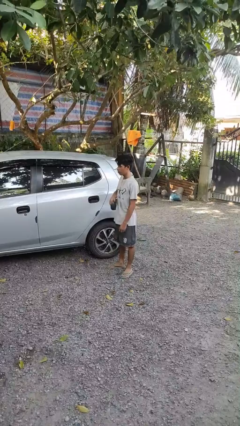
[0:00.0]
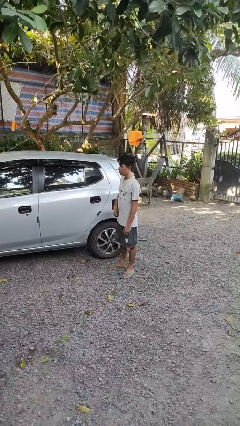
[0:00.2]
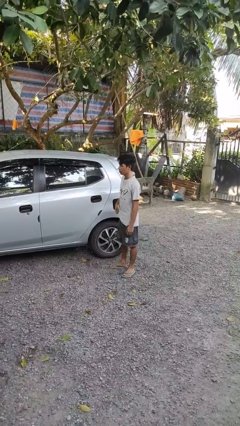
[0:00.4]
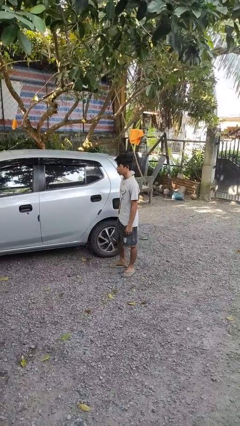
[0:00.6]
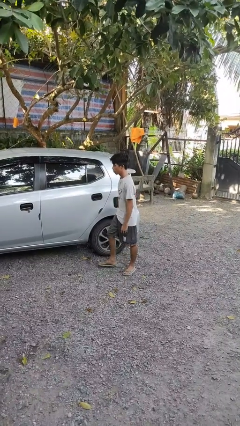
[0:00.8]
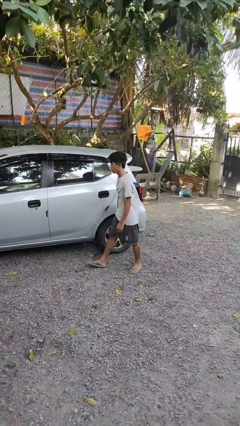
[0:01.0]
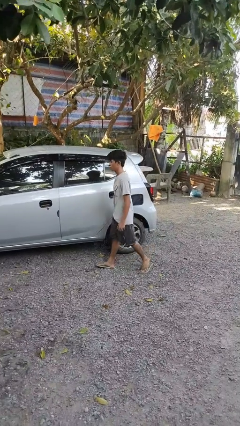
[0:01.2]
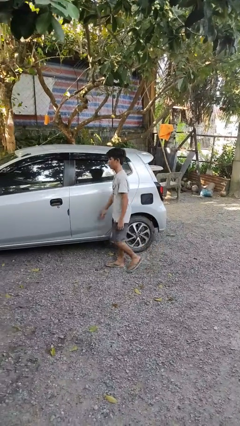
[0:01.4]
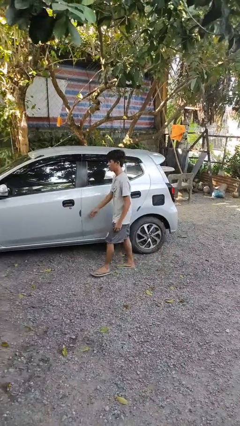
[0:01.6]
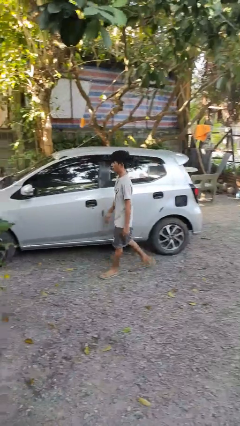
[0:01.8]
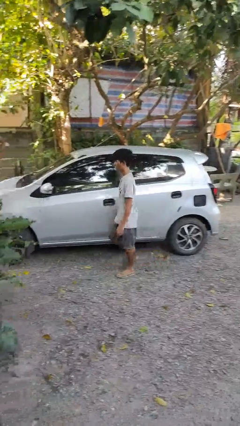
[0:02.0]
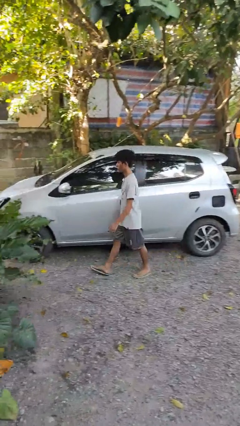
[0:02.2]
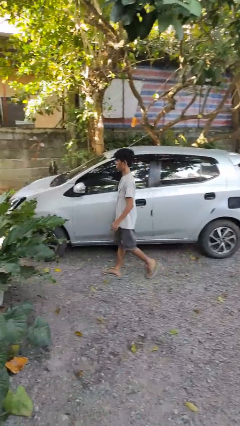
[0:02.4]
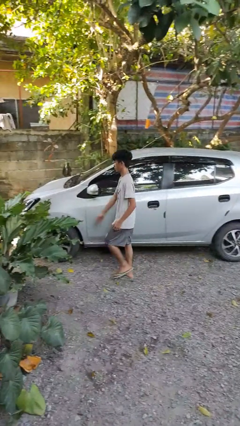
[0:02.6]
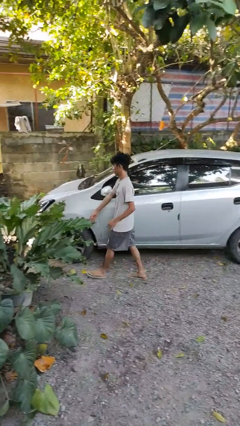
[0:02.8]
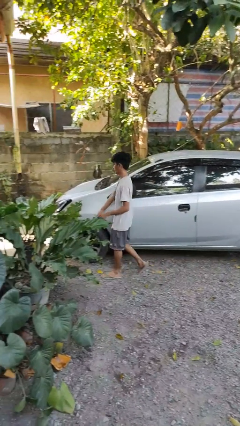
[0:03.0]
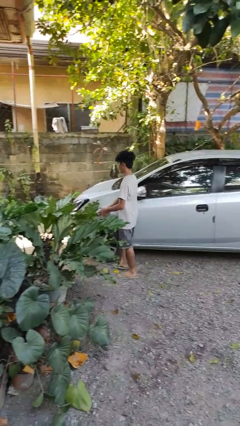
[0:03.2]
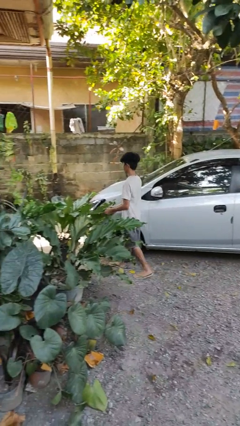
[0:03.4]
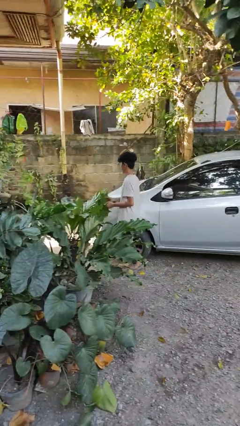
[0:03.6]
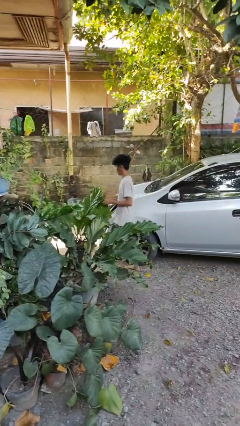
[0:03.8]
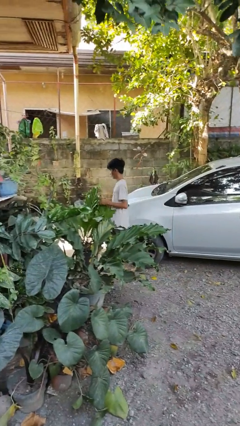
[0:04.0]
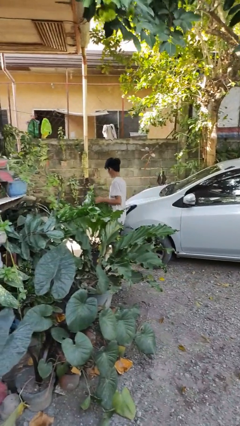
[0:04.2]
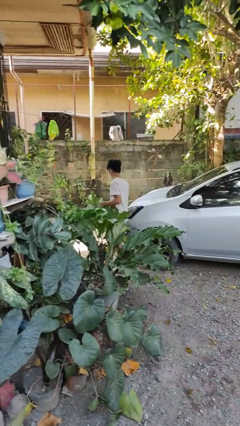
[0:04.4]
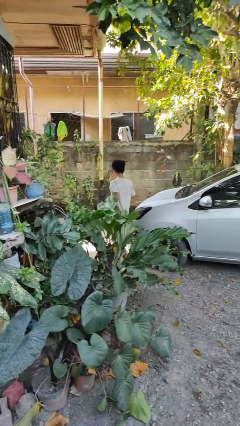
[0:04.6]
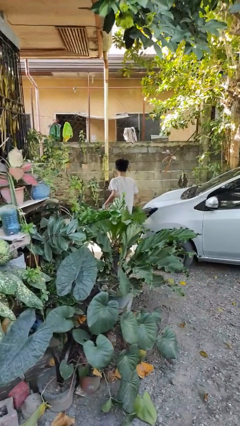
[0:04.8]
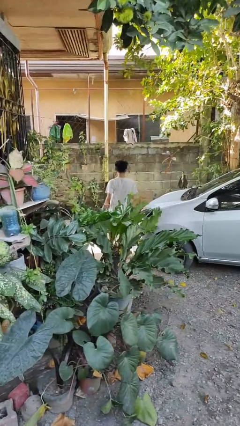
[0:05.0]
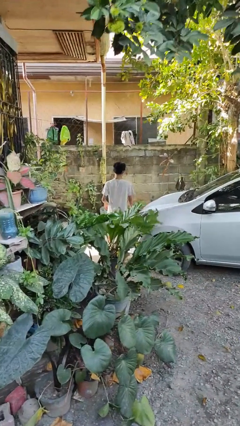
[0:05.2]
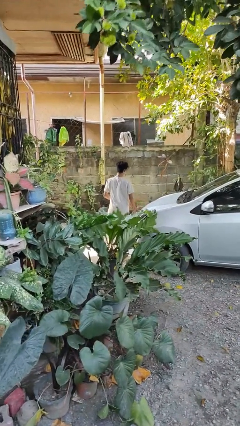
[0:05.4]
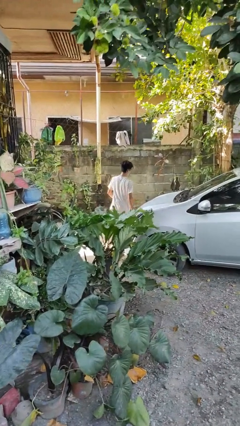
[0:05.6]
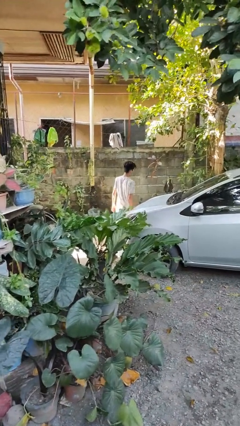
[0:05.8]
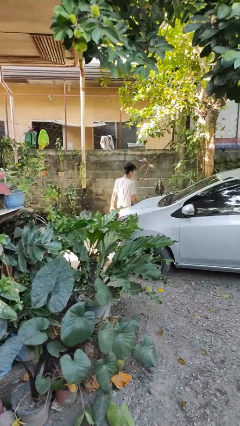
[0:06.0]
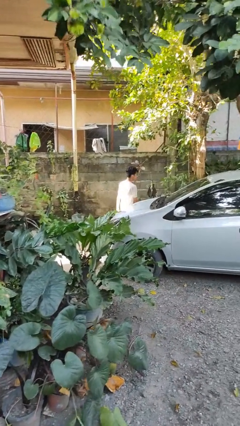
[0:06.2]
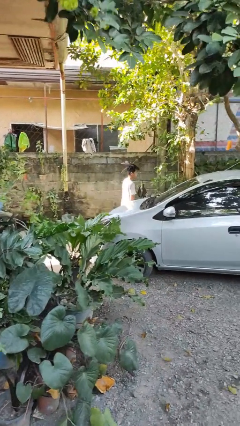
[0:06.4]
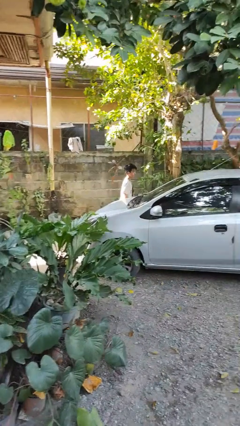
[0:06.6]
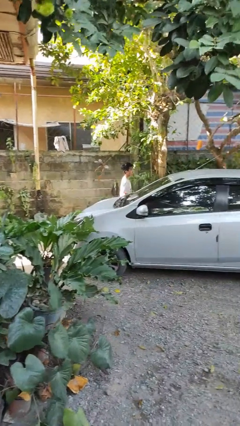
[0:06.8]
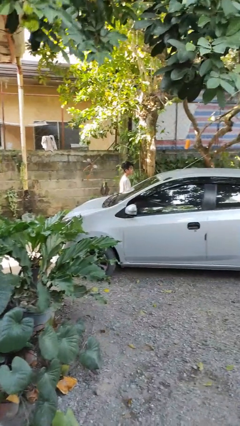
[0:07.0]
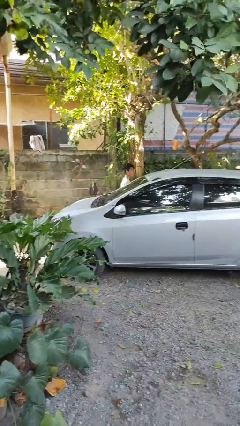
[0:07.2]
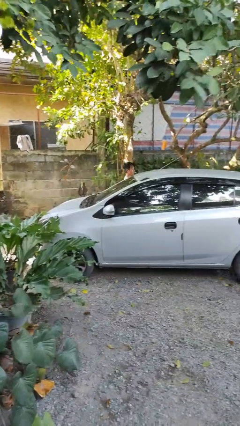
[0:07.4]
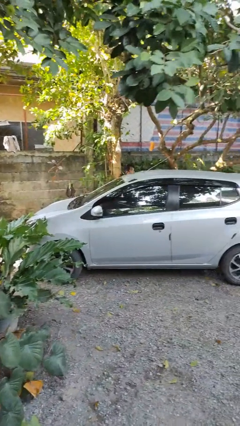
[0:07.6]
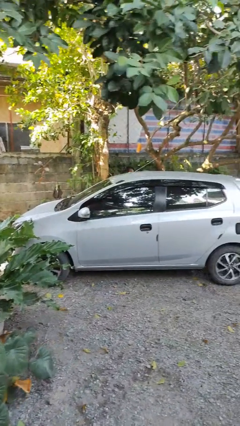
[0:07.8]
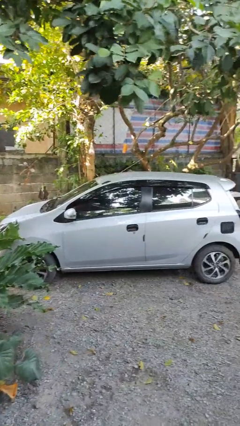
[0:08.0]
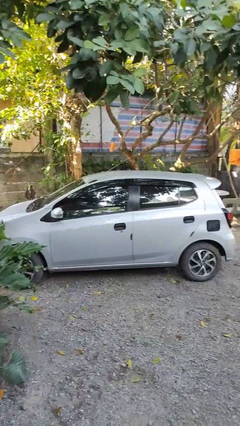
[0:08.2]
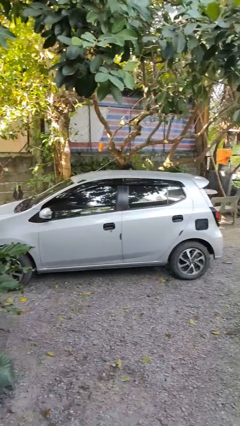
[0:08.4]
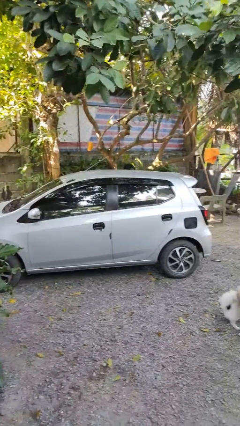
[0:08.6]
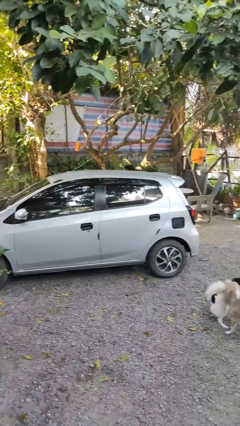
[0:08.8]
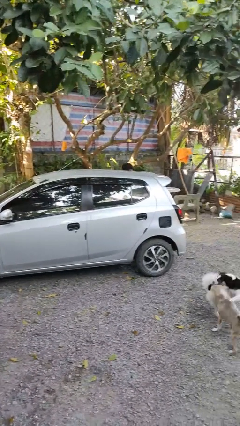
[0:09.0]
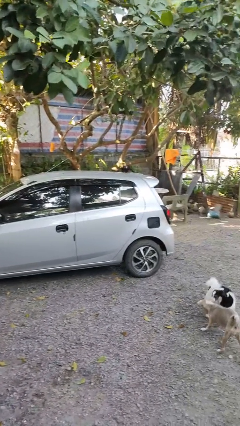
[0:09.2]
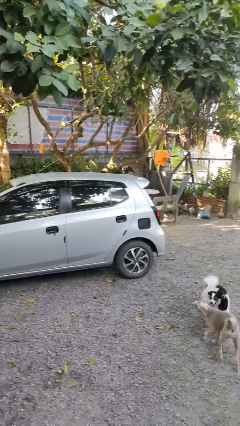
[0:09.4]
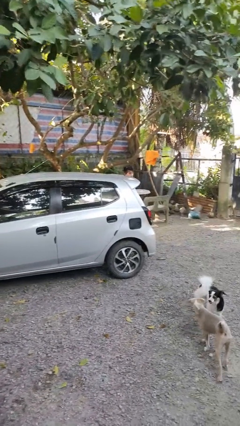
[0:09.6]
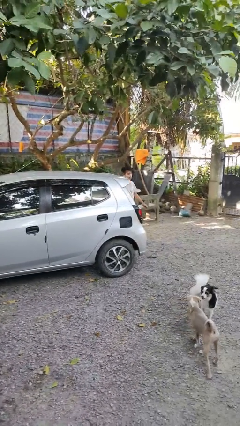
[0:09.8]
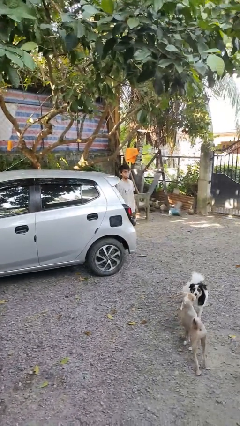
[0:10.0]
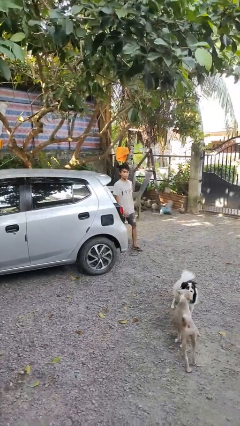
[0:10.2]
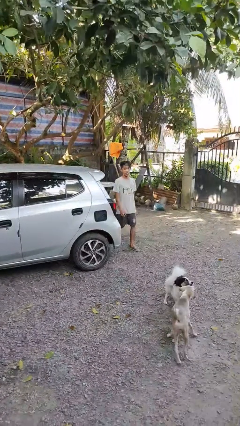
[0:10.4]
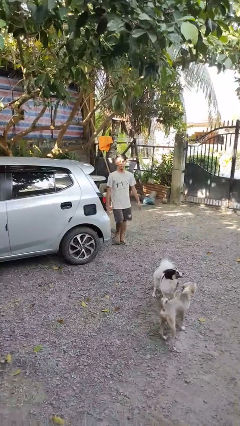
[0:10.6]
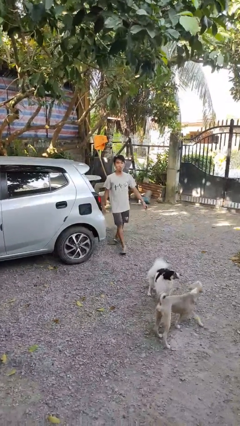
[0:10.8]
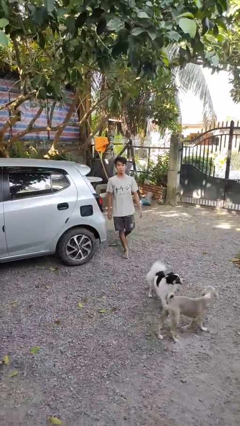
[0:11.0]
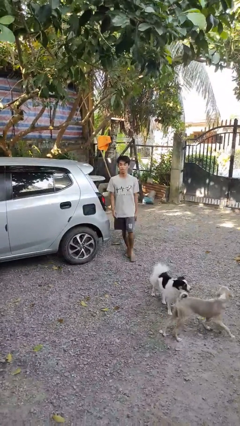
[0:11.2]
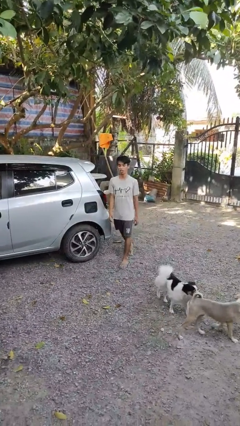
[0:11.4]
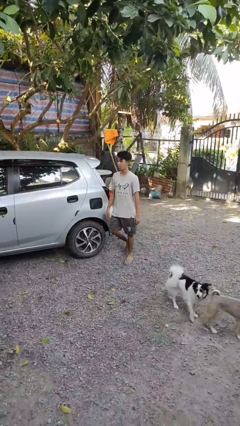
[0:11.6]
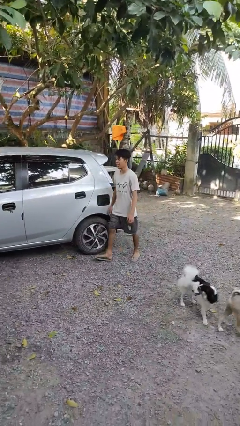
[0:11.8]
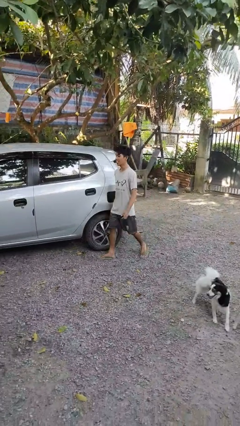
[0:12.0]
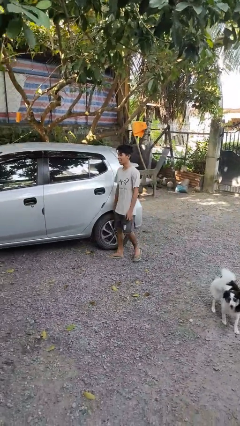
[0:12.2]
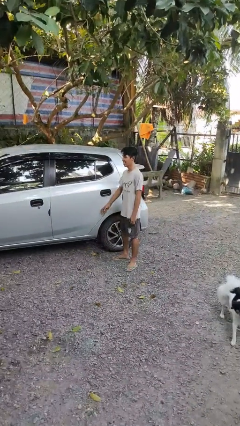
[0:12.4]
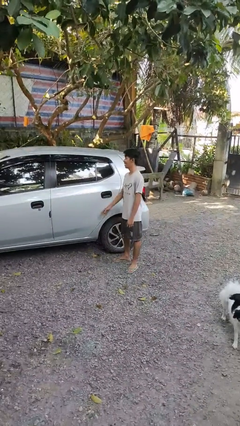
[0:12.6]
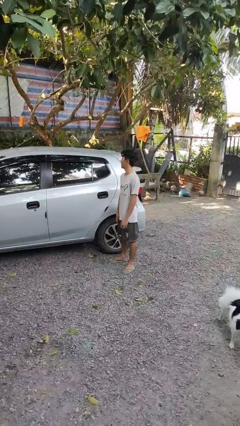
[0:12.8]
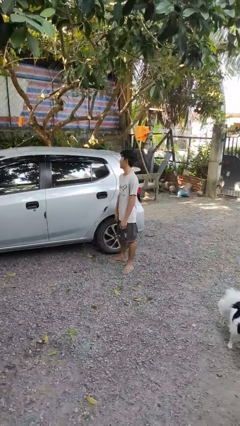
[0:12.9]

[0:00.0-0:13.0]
person walks around car

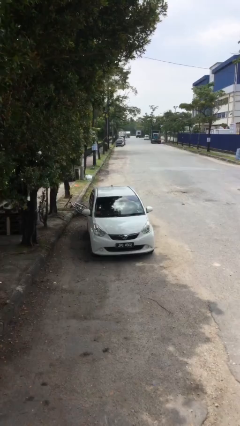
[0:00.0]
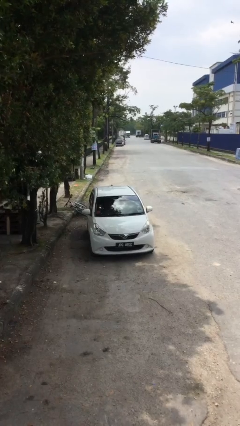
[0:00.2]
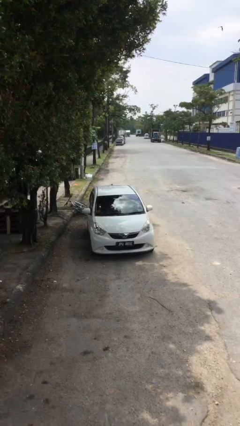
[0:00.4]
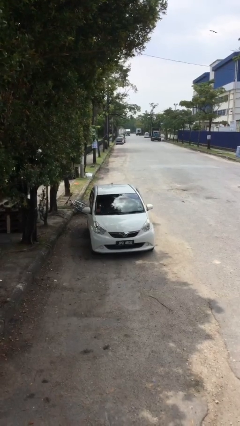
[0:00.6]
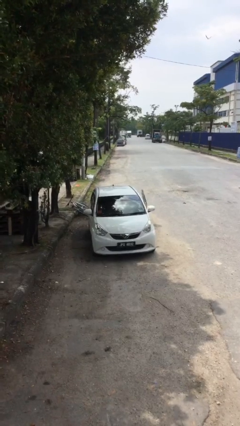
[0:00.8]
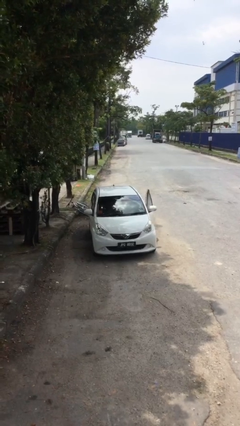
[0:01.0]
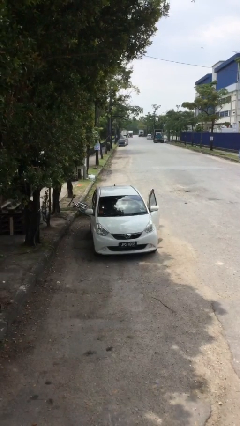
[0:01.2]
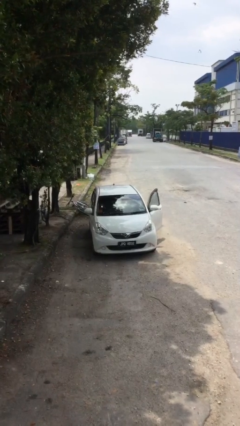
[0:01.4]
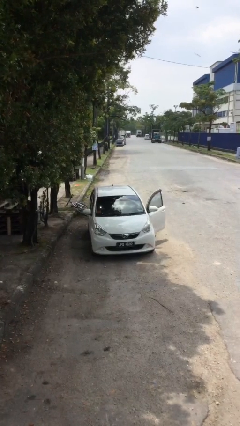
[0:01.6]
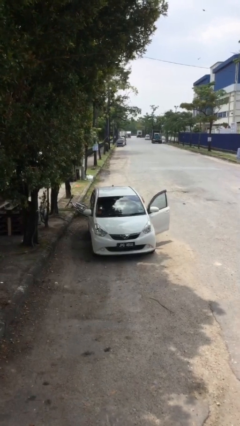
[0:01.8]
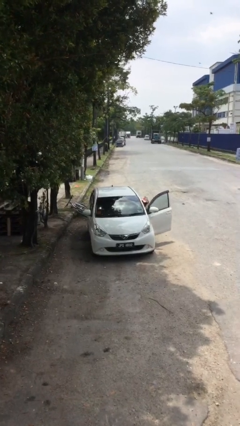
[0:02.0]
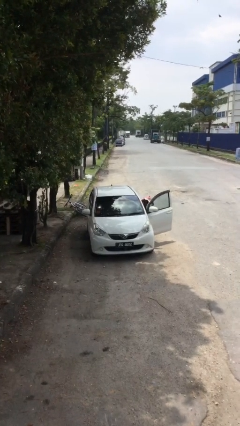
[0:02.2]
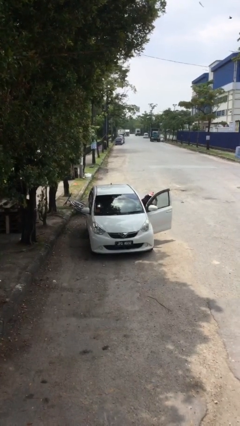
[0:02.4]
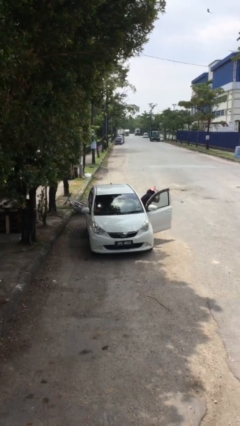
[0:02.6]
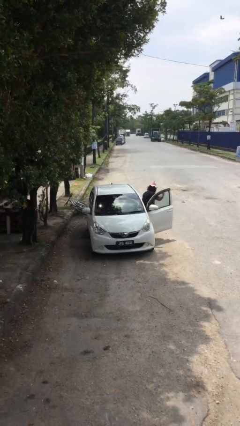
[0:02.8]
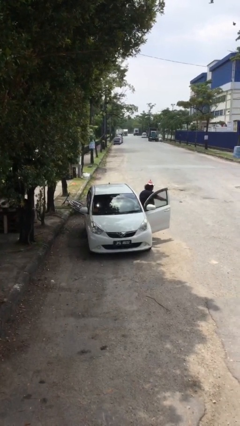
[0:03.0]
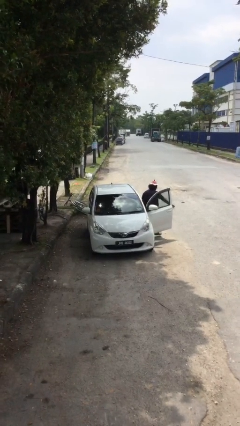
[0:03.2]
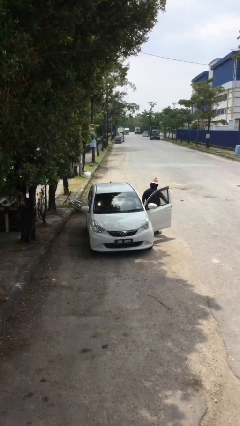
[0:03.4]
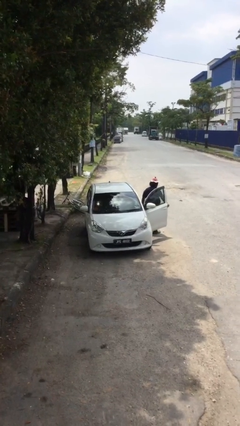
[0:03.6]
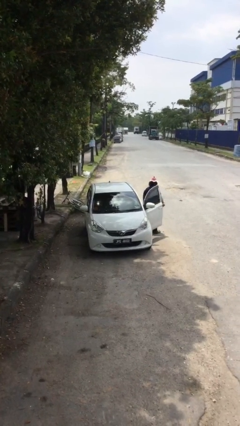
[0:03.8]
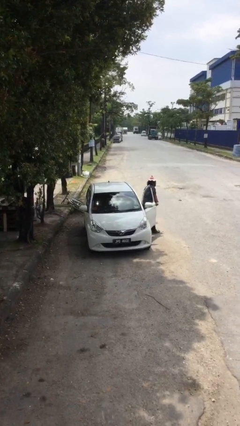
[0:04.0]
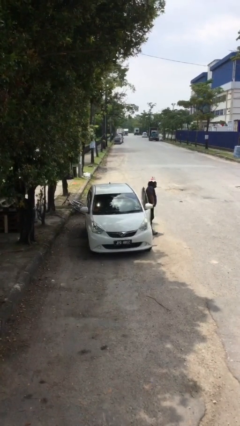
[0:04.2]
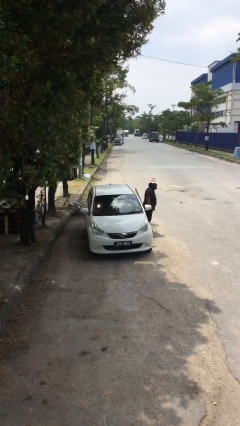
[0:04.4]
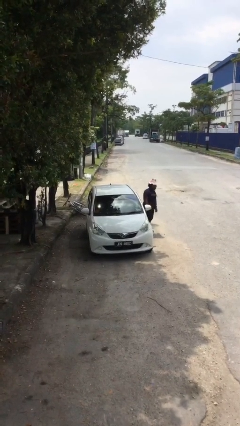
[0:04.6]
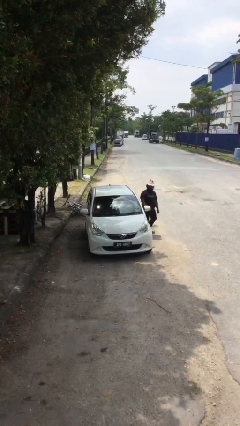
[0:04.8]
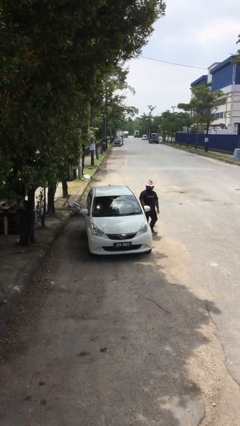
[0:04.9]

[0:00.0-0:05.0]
car drops off person

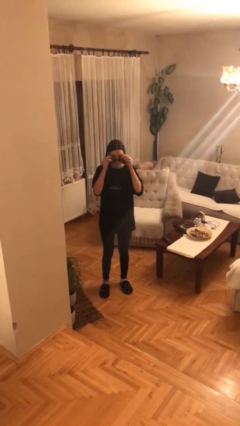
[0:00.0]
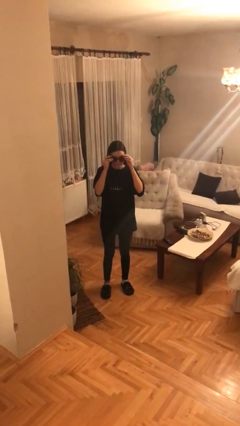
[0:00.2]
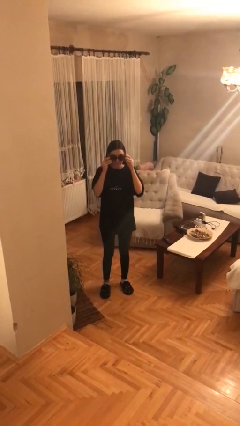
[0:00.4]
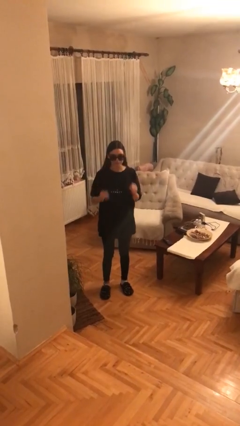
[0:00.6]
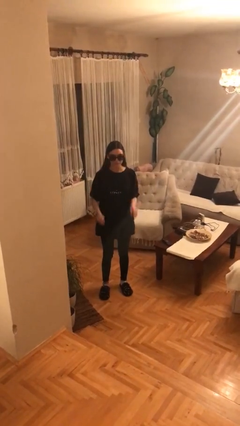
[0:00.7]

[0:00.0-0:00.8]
person puts on sunglasses
